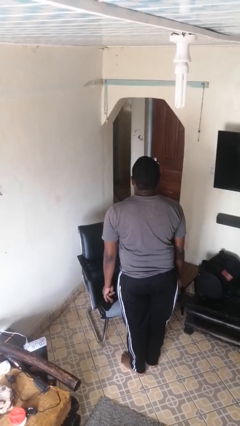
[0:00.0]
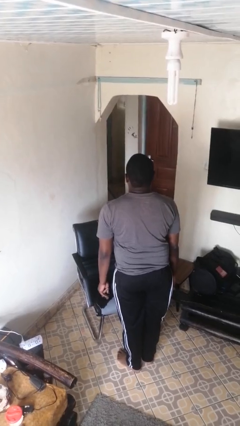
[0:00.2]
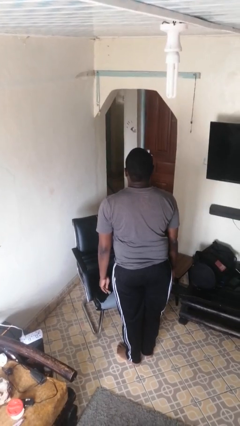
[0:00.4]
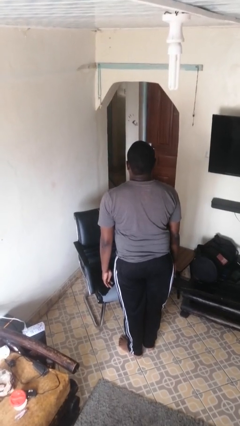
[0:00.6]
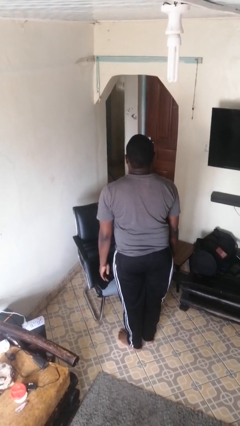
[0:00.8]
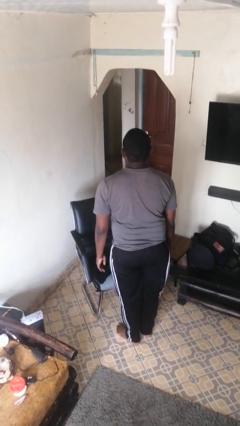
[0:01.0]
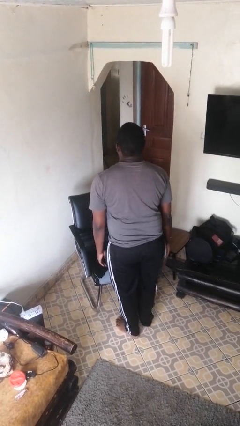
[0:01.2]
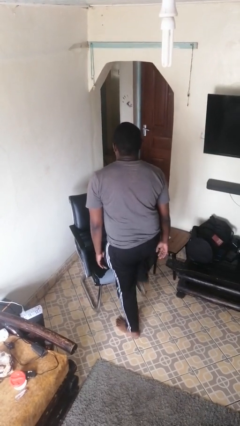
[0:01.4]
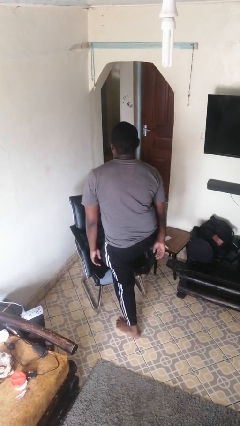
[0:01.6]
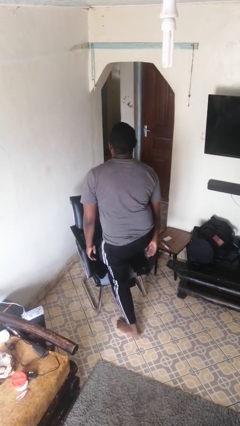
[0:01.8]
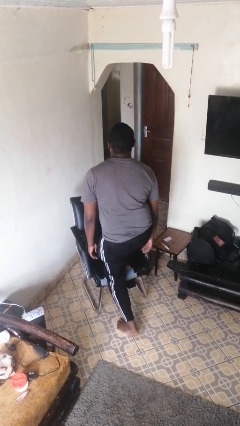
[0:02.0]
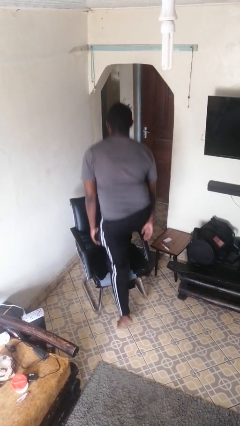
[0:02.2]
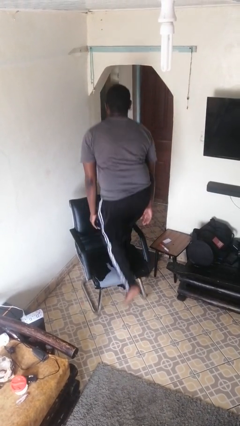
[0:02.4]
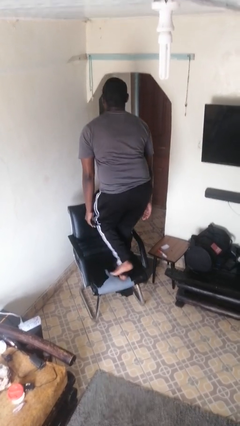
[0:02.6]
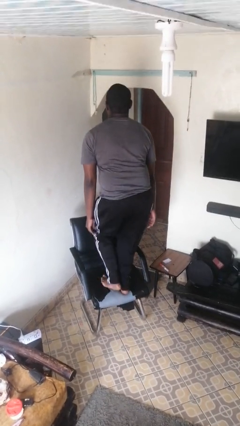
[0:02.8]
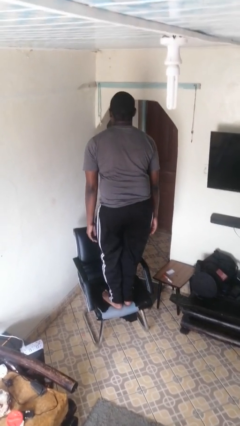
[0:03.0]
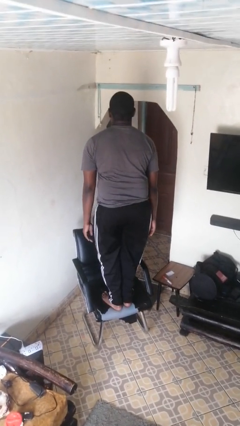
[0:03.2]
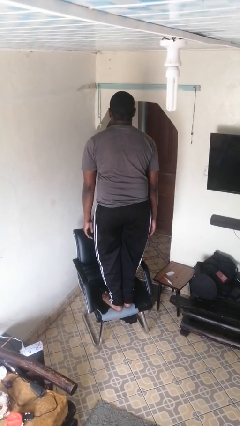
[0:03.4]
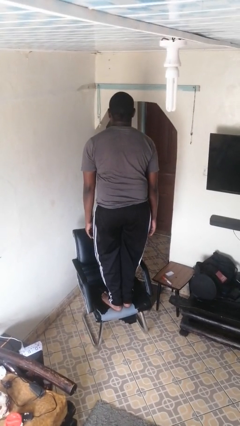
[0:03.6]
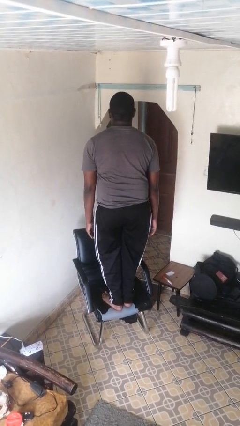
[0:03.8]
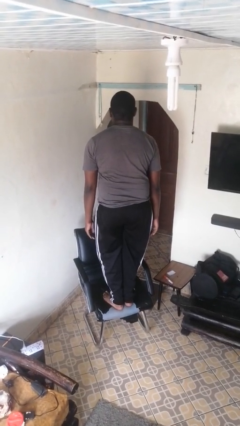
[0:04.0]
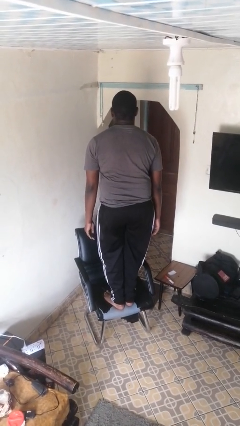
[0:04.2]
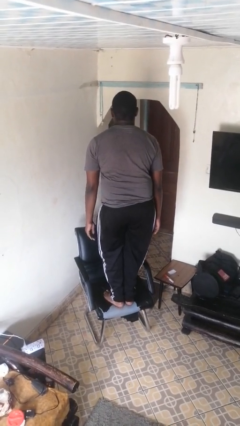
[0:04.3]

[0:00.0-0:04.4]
person climbs on chair

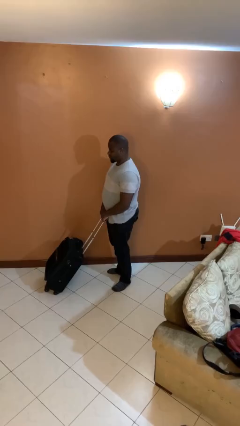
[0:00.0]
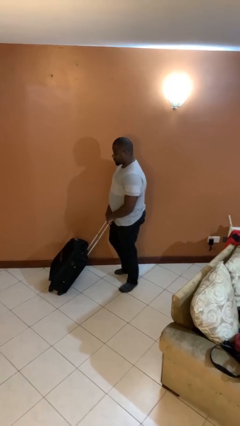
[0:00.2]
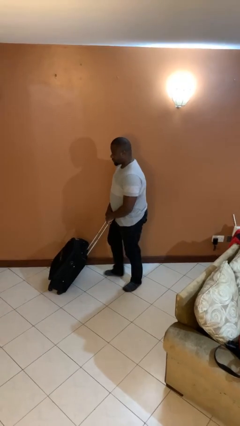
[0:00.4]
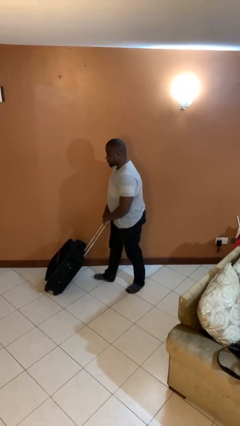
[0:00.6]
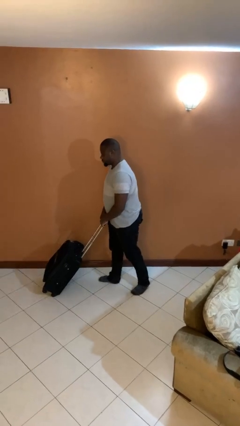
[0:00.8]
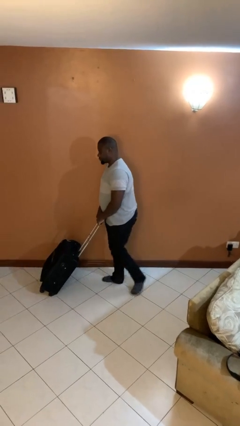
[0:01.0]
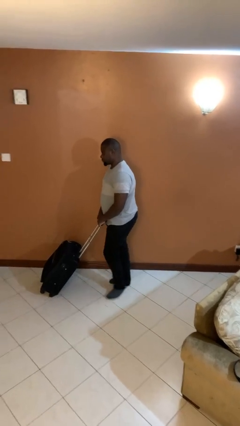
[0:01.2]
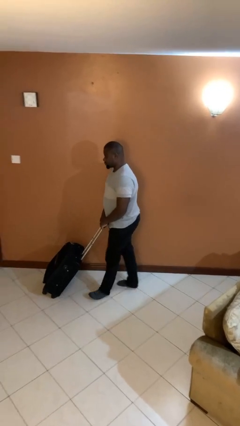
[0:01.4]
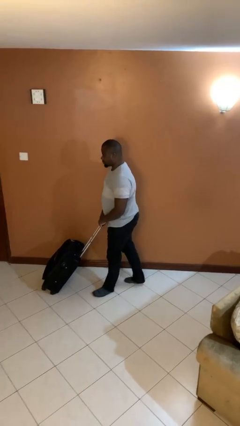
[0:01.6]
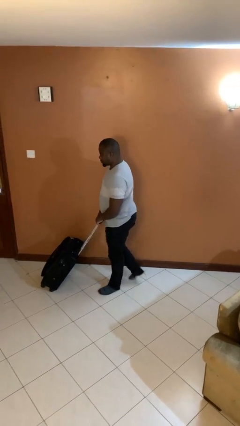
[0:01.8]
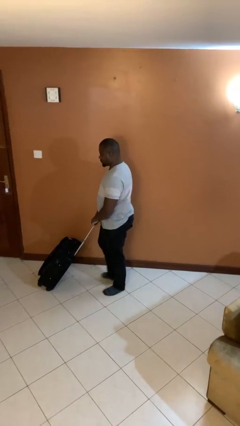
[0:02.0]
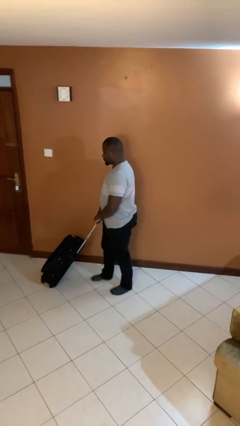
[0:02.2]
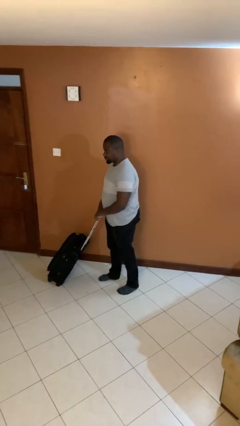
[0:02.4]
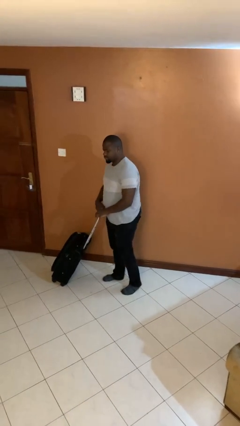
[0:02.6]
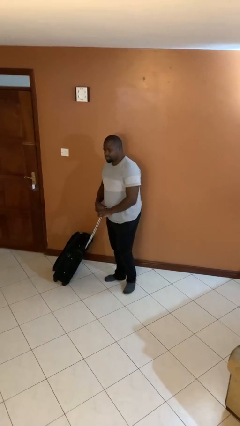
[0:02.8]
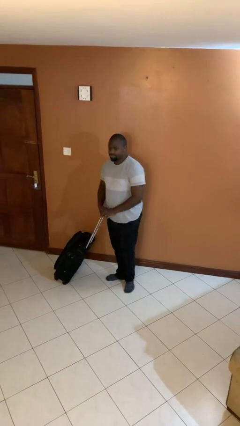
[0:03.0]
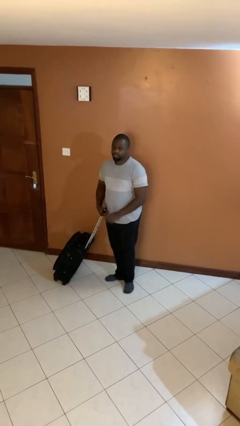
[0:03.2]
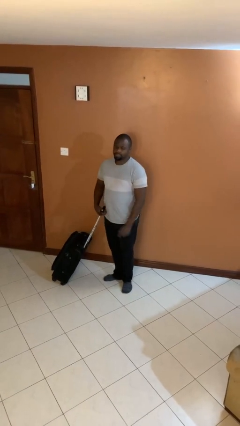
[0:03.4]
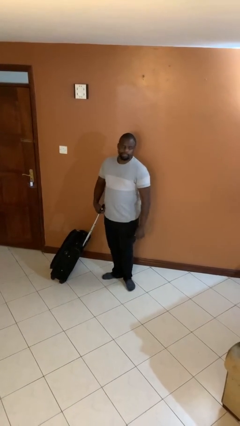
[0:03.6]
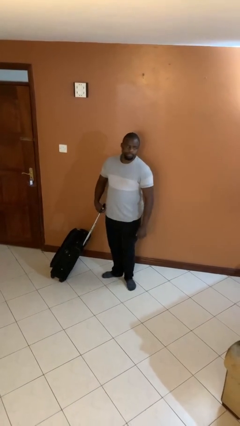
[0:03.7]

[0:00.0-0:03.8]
person pushes wheeled cart

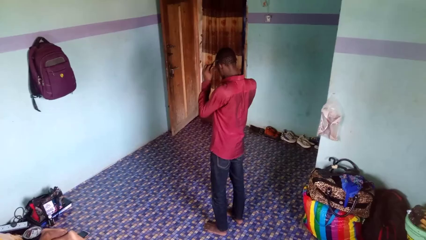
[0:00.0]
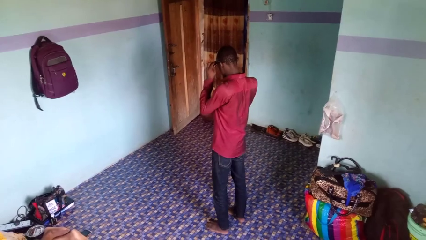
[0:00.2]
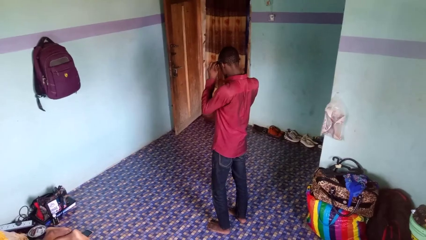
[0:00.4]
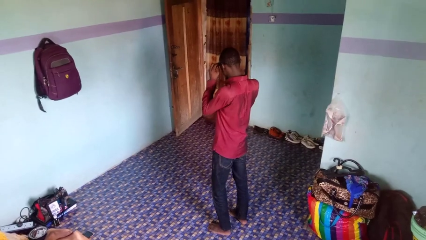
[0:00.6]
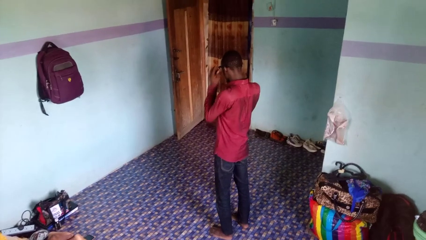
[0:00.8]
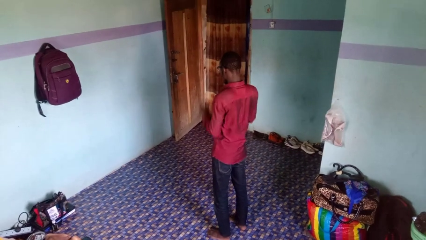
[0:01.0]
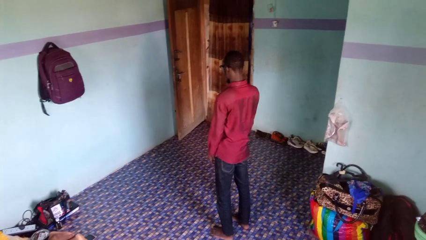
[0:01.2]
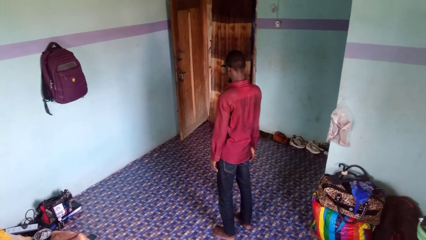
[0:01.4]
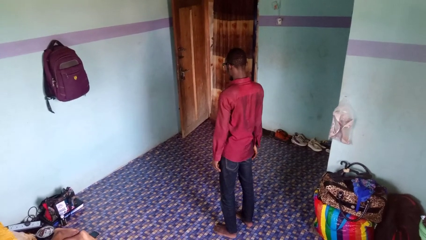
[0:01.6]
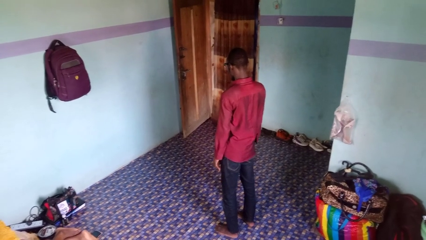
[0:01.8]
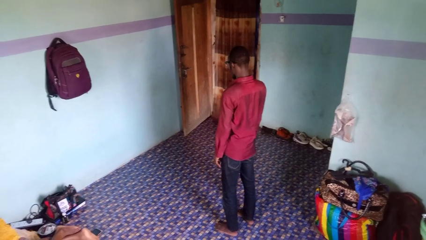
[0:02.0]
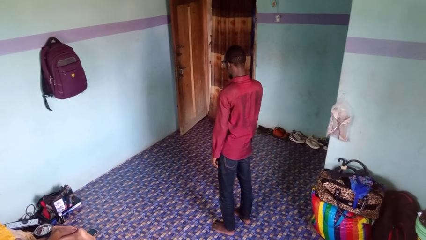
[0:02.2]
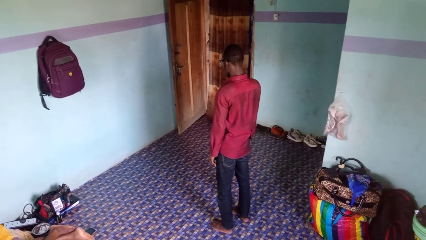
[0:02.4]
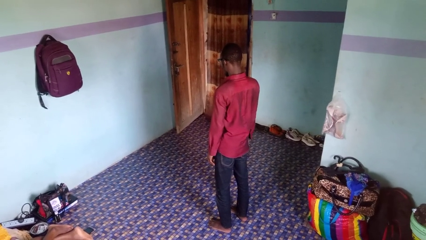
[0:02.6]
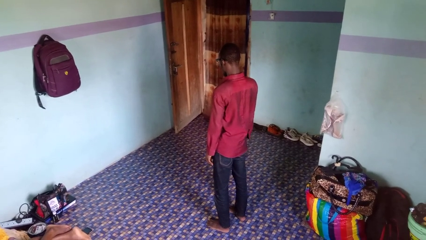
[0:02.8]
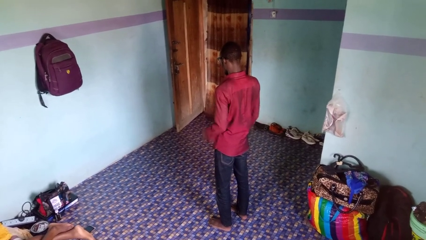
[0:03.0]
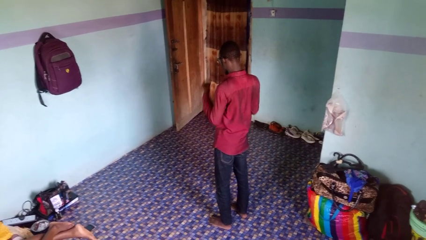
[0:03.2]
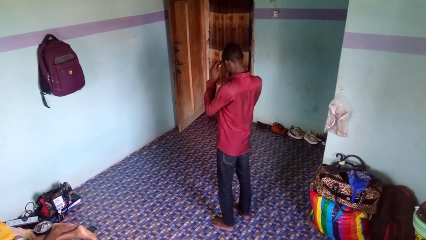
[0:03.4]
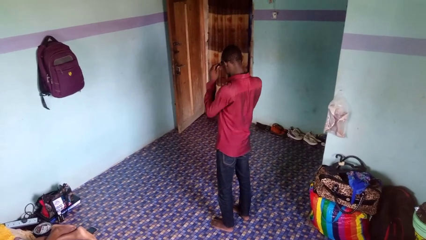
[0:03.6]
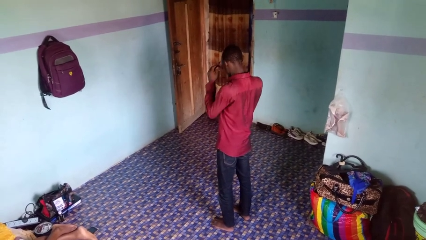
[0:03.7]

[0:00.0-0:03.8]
person puts on glasses

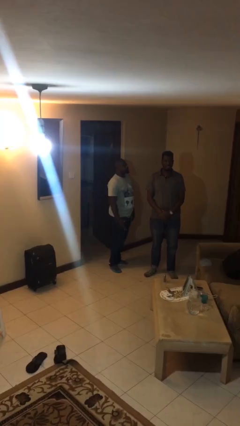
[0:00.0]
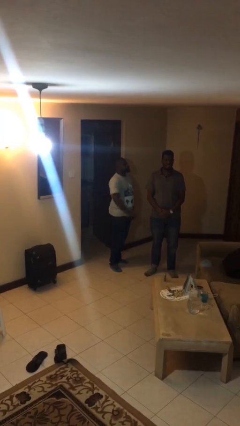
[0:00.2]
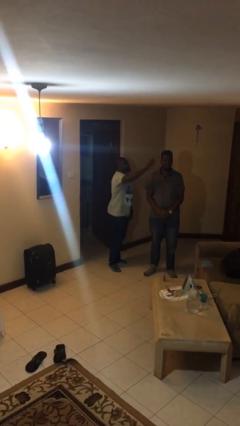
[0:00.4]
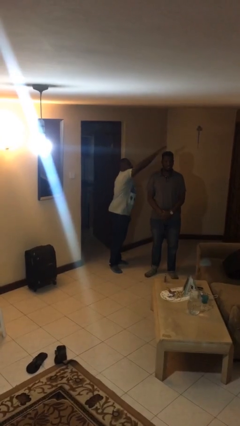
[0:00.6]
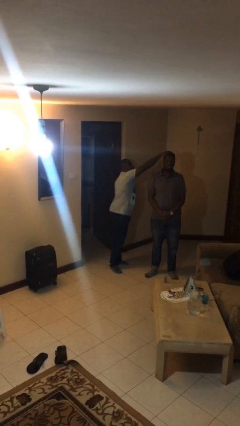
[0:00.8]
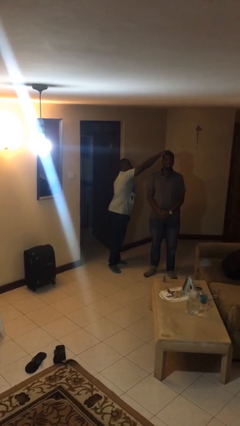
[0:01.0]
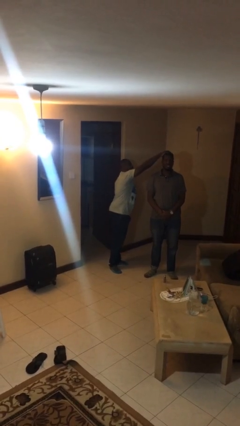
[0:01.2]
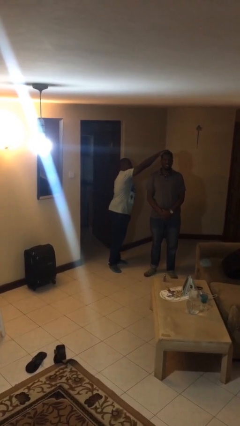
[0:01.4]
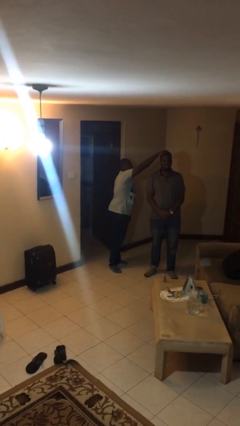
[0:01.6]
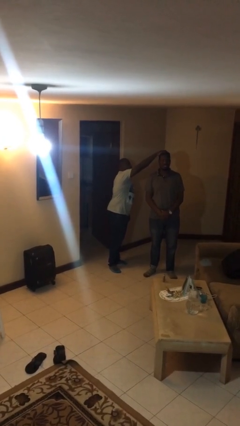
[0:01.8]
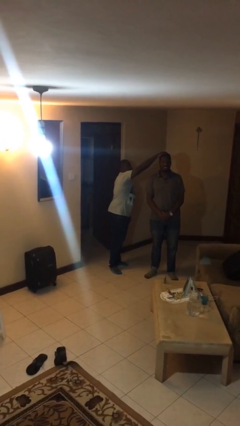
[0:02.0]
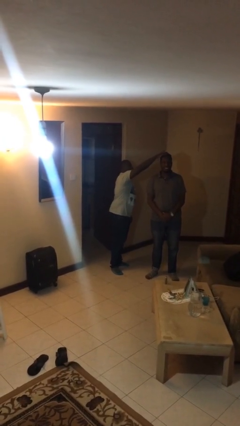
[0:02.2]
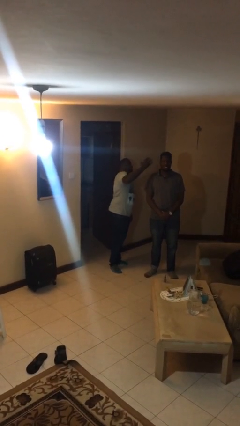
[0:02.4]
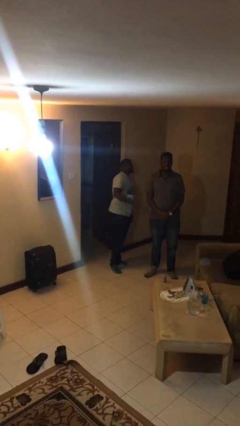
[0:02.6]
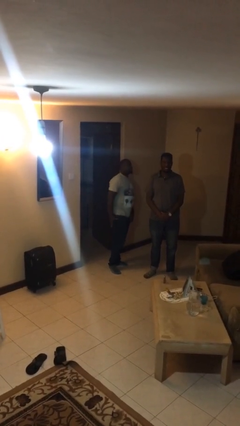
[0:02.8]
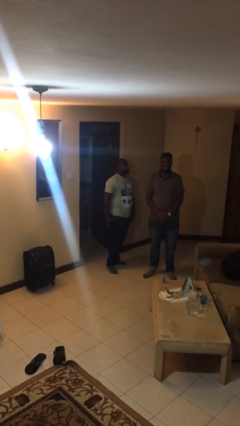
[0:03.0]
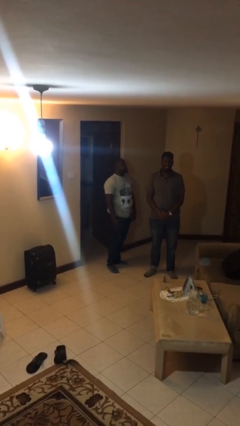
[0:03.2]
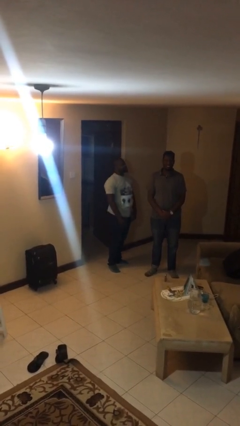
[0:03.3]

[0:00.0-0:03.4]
person grabs person by hair

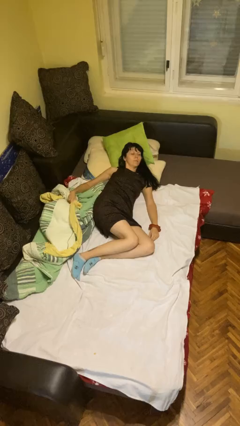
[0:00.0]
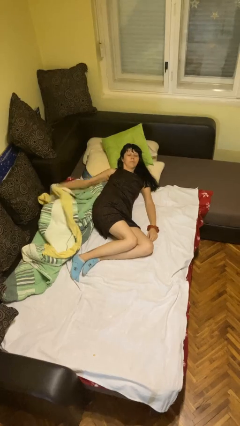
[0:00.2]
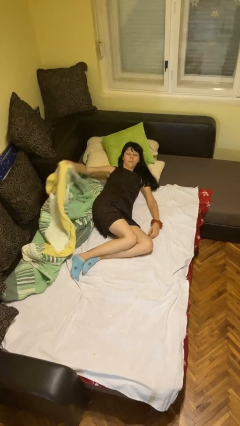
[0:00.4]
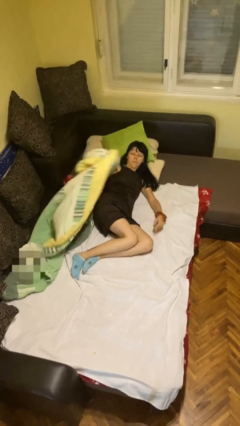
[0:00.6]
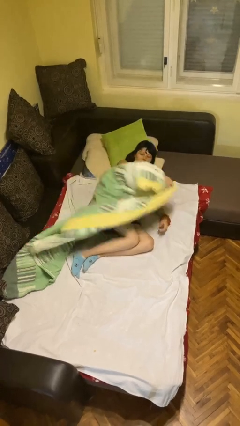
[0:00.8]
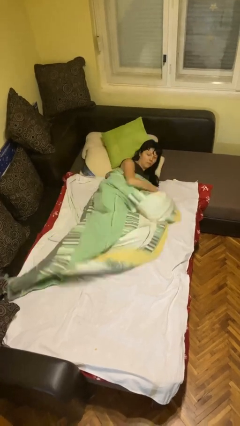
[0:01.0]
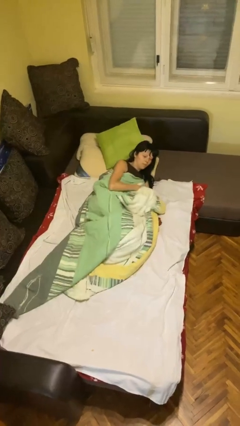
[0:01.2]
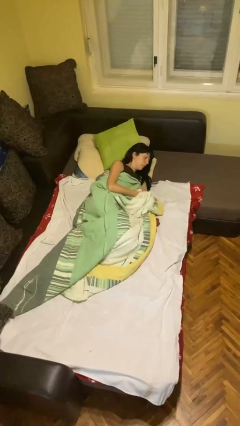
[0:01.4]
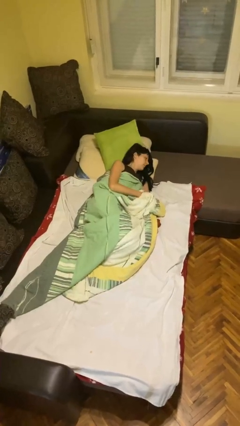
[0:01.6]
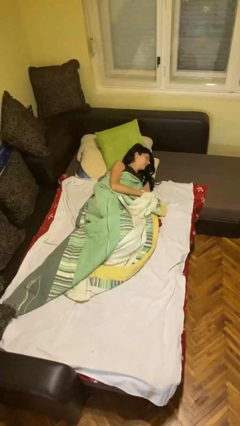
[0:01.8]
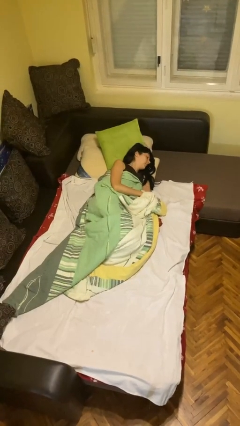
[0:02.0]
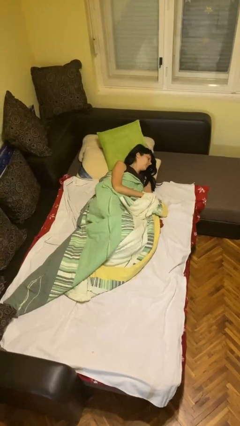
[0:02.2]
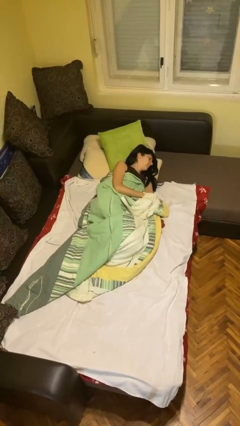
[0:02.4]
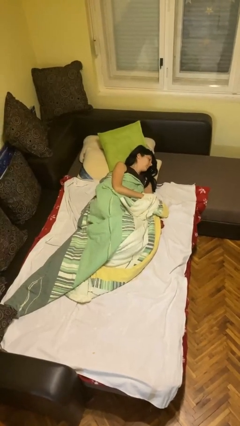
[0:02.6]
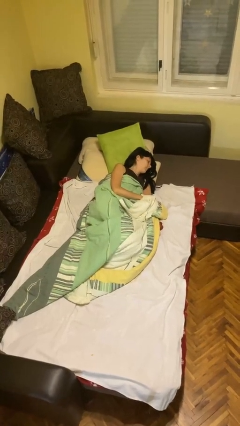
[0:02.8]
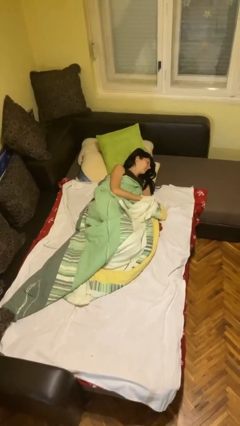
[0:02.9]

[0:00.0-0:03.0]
person covers with bedsheets
